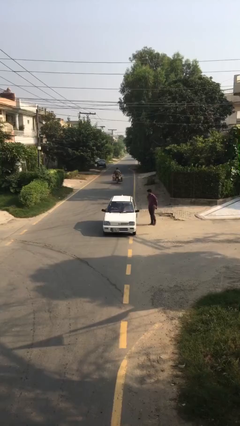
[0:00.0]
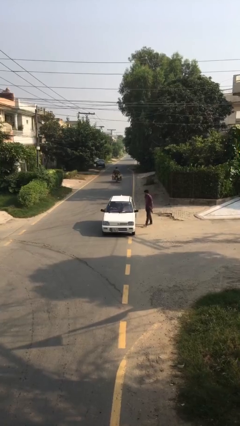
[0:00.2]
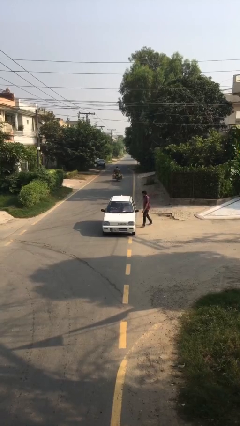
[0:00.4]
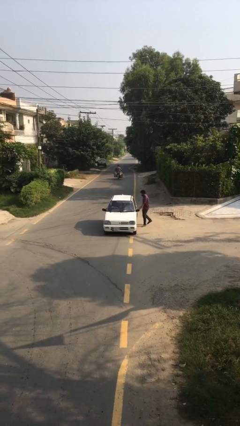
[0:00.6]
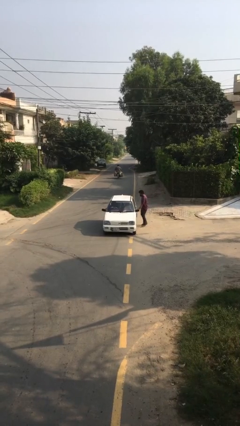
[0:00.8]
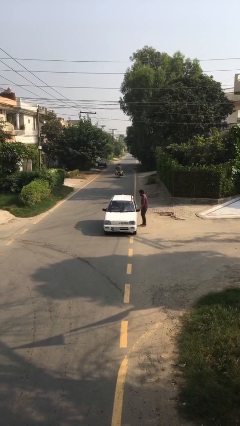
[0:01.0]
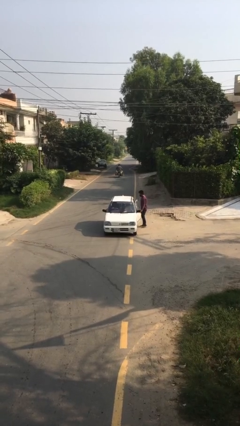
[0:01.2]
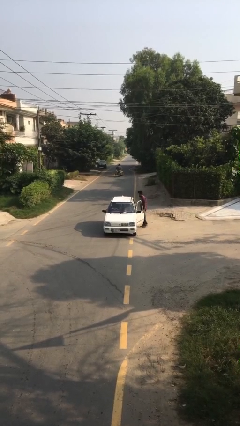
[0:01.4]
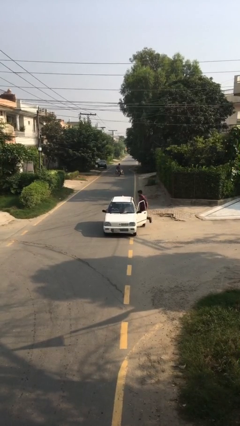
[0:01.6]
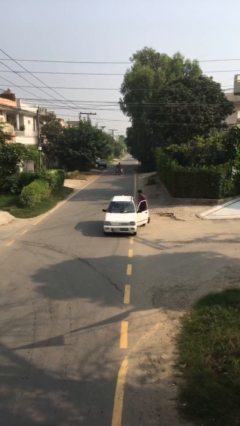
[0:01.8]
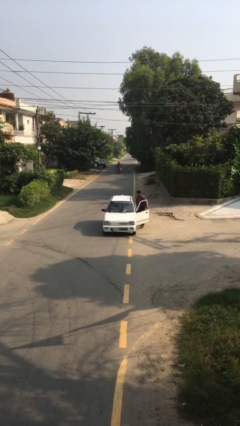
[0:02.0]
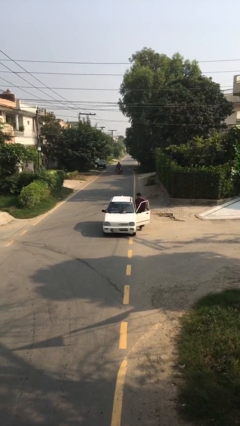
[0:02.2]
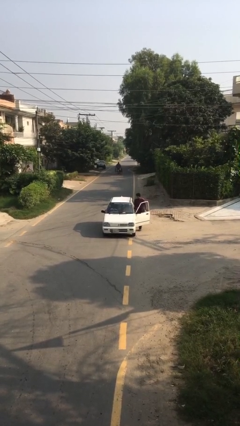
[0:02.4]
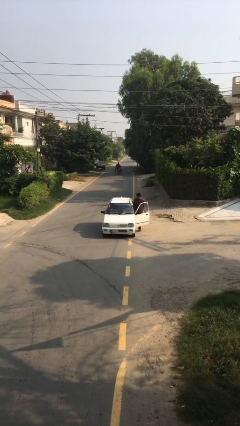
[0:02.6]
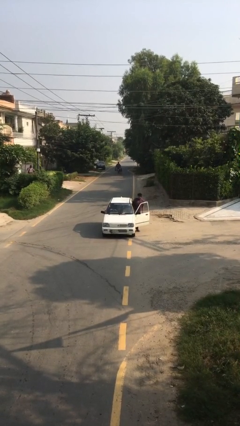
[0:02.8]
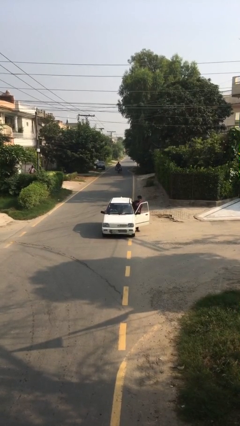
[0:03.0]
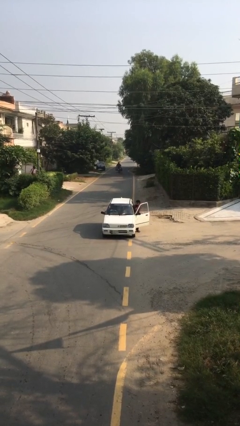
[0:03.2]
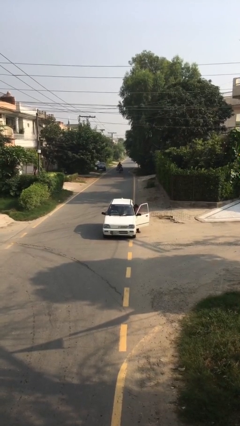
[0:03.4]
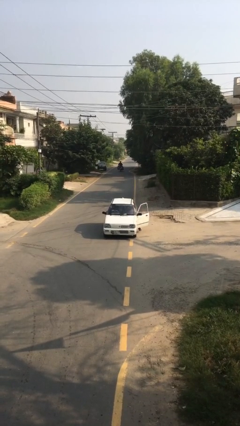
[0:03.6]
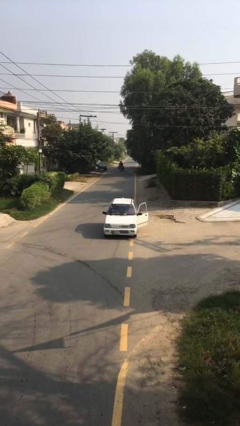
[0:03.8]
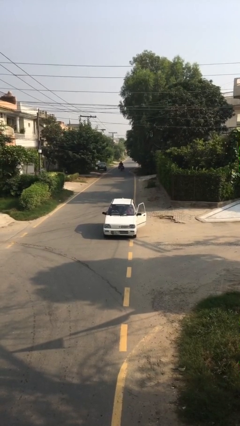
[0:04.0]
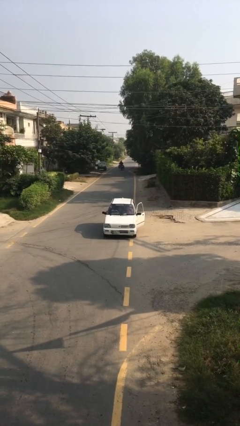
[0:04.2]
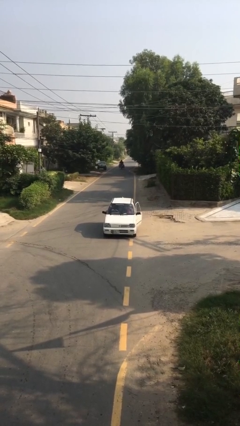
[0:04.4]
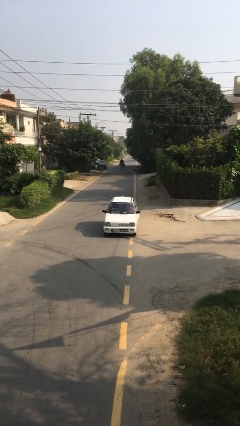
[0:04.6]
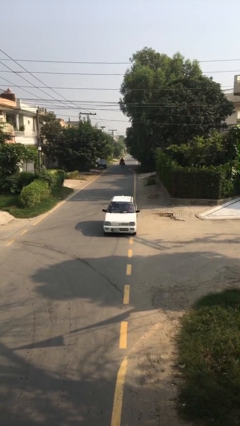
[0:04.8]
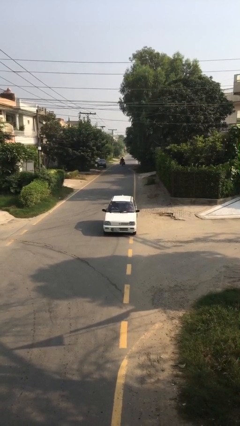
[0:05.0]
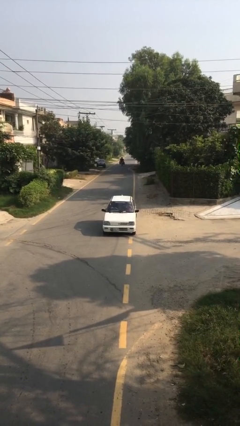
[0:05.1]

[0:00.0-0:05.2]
car picks up person

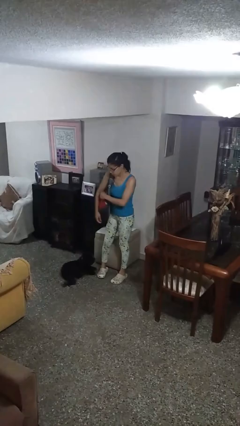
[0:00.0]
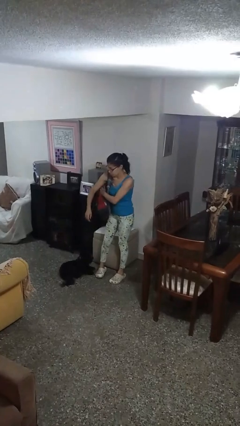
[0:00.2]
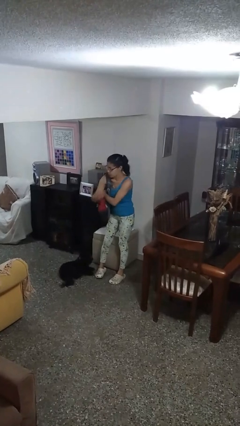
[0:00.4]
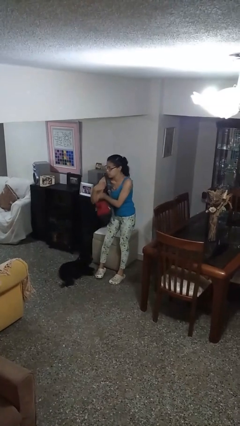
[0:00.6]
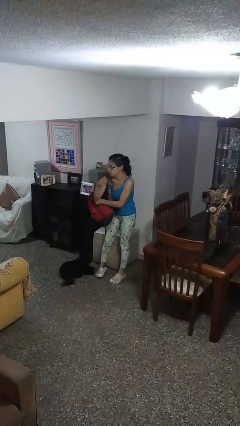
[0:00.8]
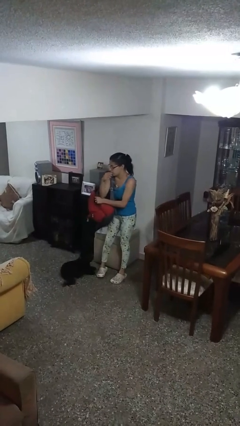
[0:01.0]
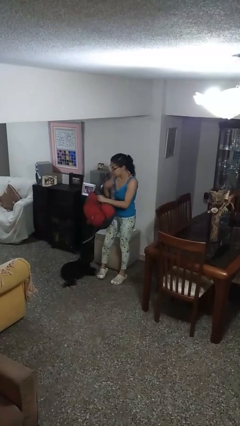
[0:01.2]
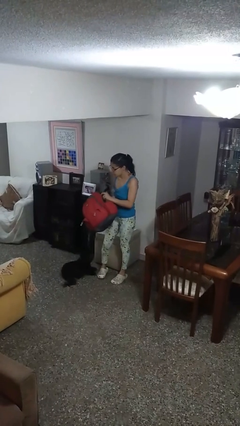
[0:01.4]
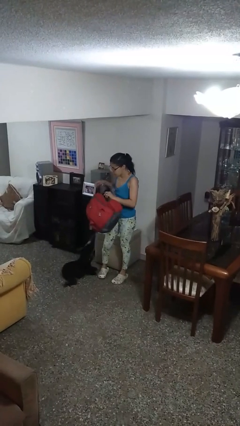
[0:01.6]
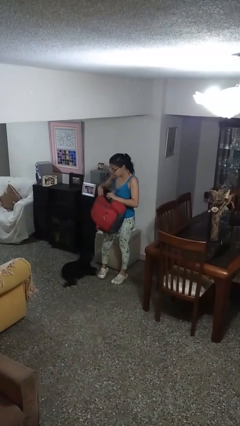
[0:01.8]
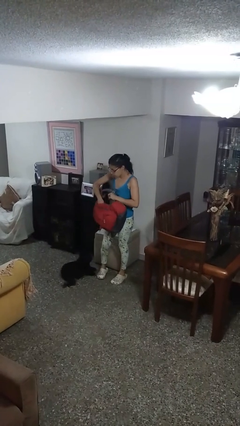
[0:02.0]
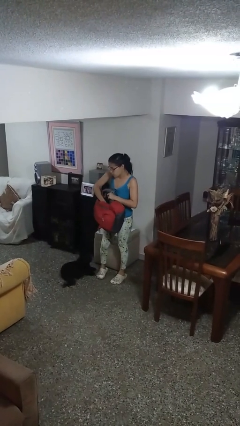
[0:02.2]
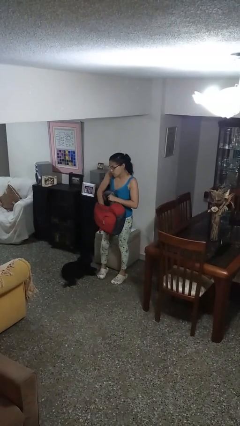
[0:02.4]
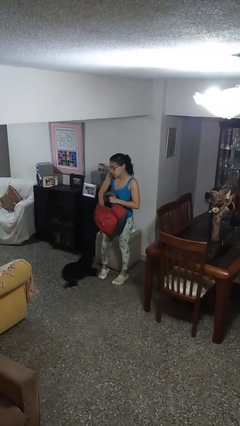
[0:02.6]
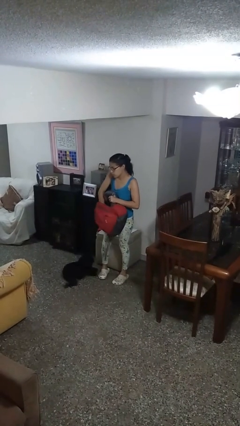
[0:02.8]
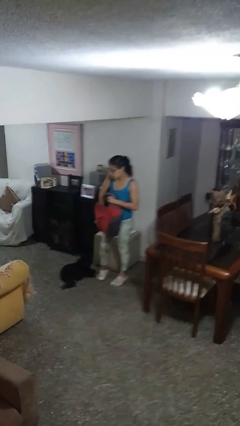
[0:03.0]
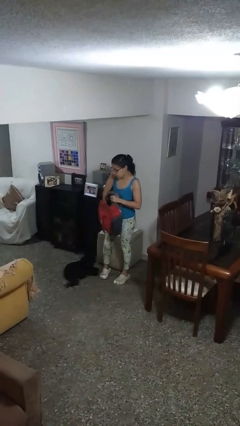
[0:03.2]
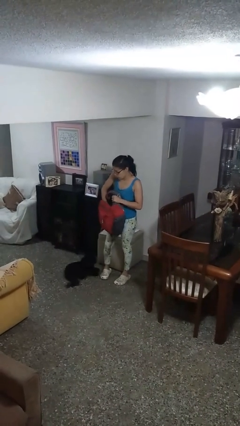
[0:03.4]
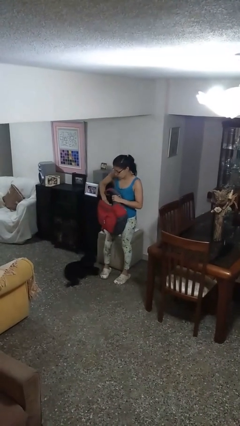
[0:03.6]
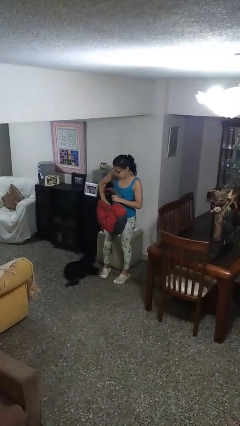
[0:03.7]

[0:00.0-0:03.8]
person searches in backpack

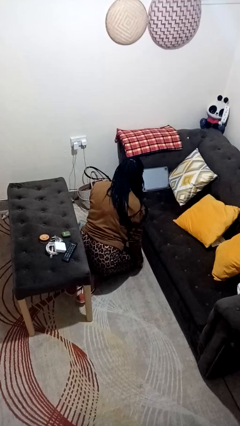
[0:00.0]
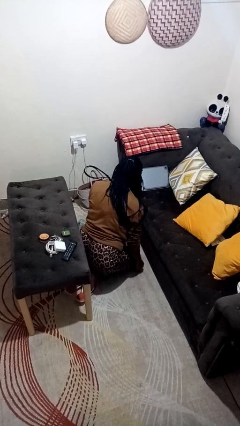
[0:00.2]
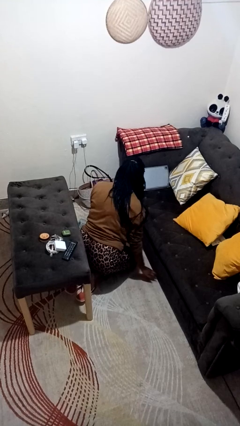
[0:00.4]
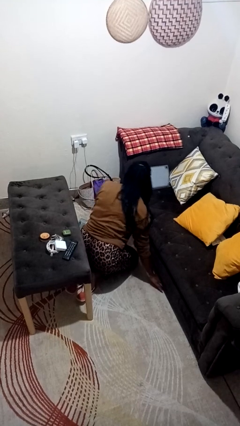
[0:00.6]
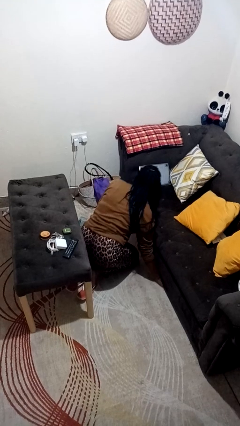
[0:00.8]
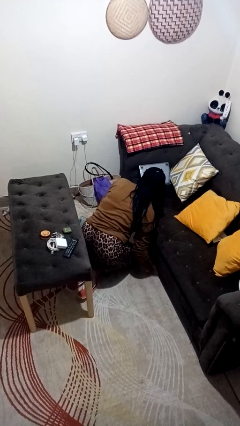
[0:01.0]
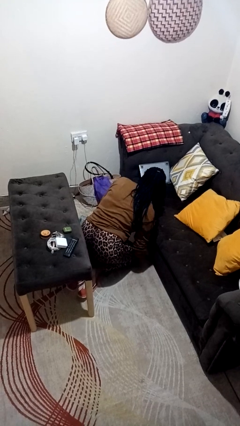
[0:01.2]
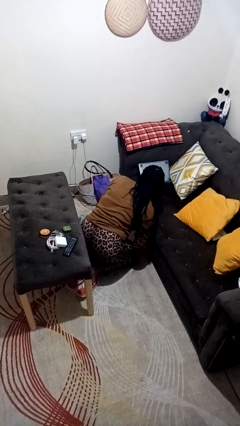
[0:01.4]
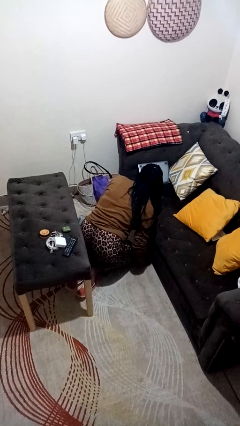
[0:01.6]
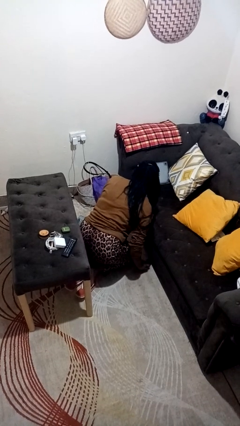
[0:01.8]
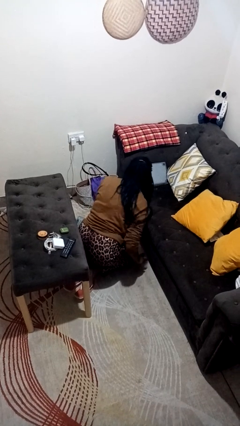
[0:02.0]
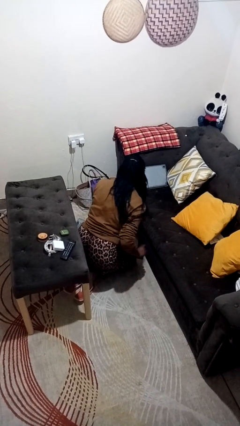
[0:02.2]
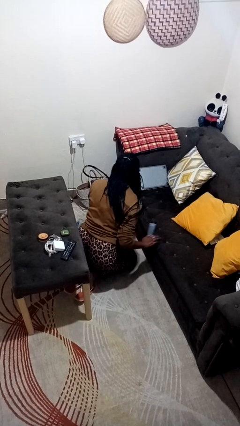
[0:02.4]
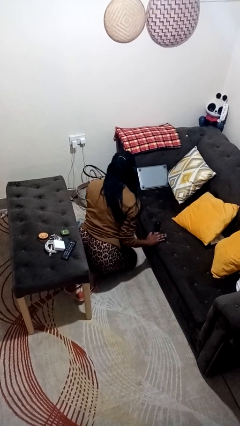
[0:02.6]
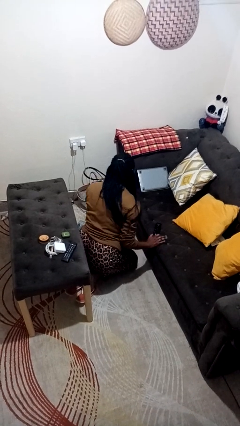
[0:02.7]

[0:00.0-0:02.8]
person searches under couch

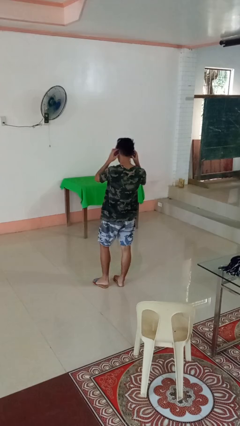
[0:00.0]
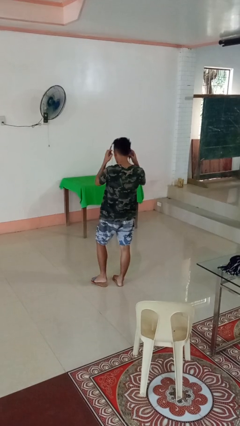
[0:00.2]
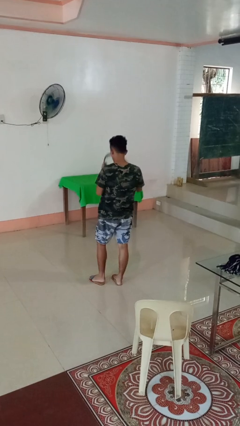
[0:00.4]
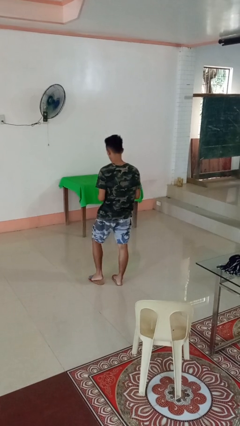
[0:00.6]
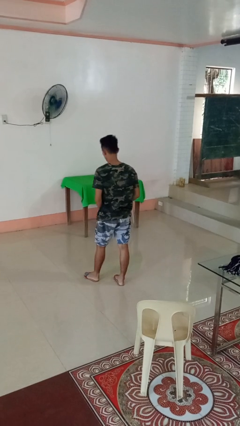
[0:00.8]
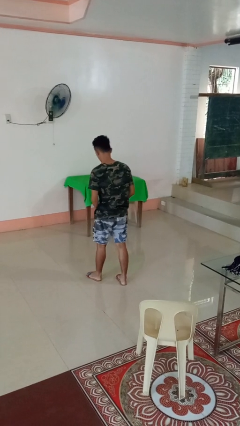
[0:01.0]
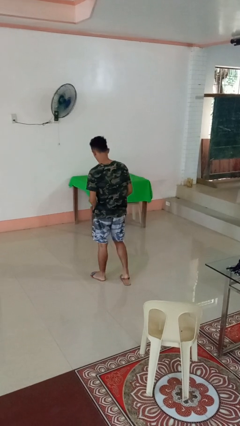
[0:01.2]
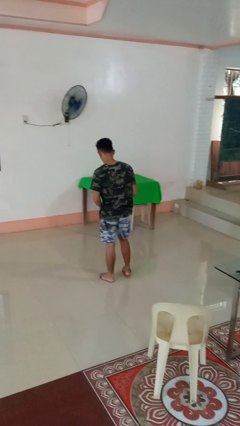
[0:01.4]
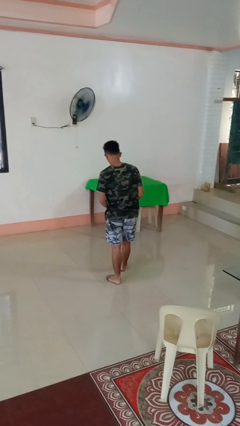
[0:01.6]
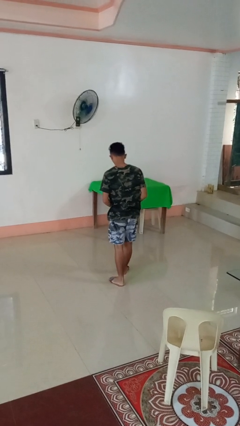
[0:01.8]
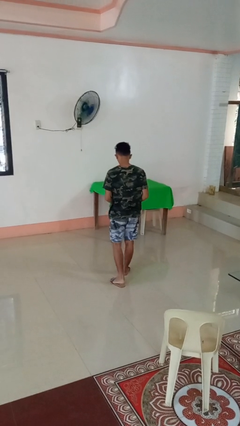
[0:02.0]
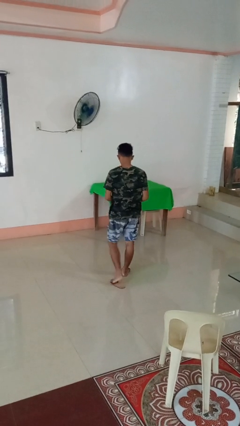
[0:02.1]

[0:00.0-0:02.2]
person takes off headphones

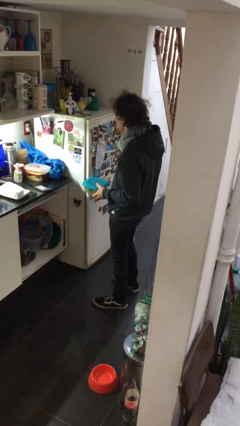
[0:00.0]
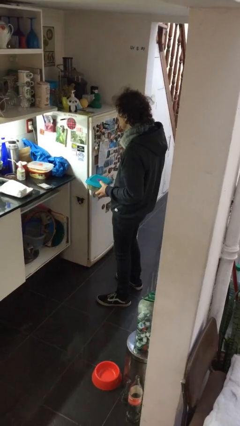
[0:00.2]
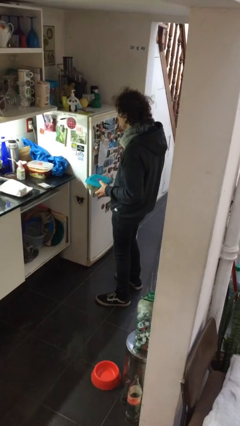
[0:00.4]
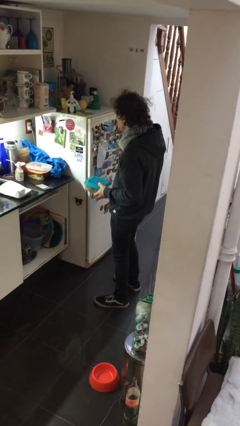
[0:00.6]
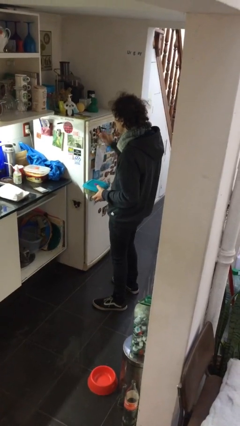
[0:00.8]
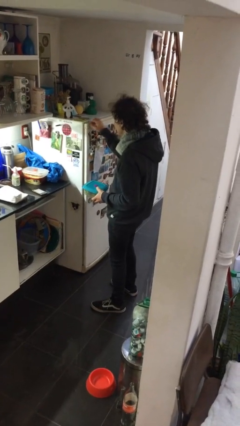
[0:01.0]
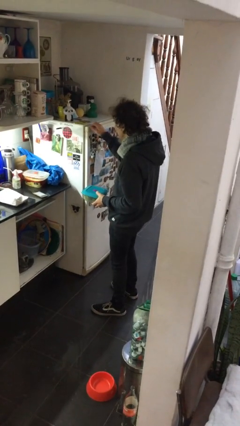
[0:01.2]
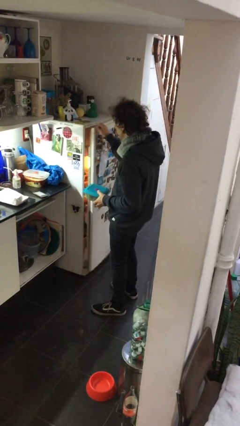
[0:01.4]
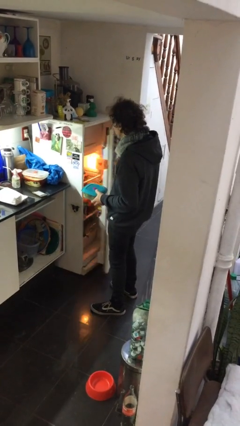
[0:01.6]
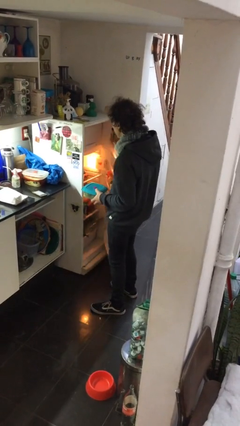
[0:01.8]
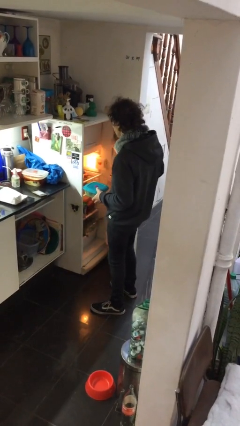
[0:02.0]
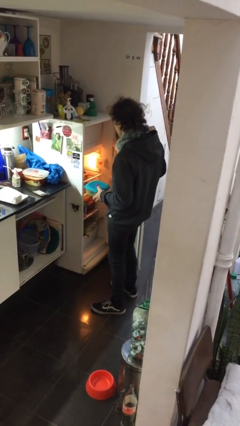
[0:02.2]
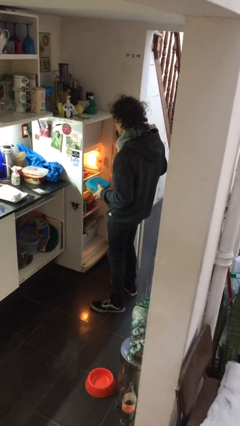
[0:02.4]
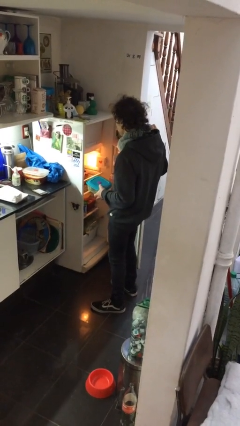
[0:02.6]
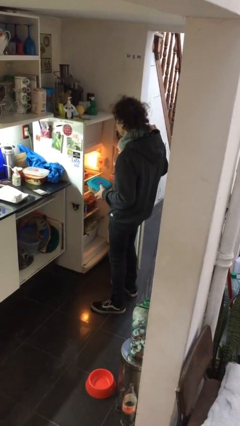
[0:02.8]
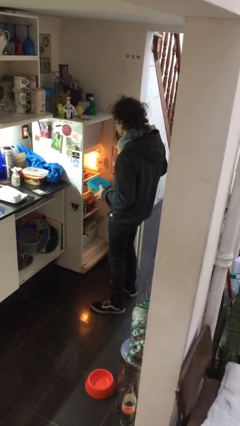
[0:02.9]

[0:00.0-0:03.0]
person opens refrigerator

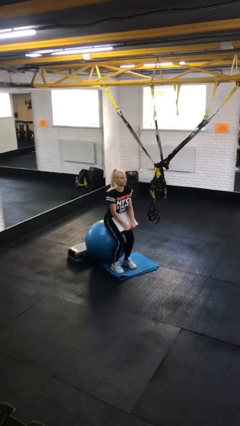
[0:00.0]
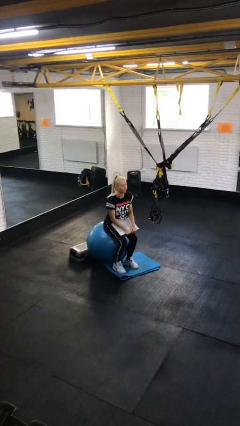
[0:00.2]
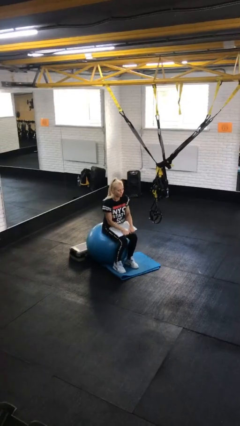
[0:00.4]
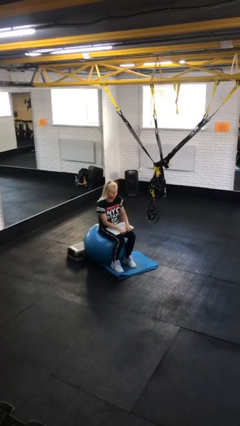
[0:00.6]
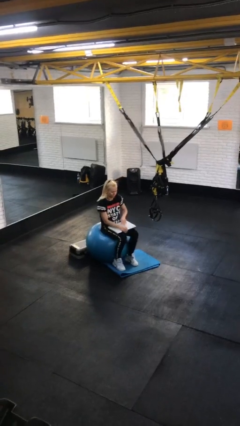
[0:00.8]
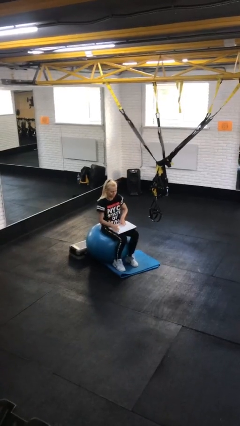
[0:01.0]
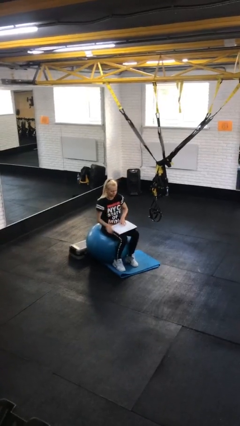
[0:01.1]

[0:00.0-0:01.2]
person sits down
